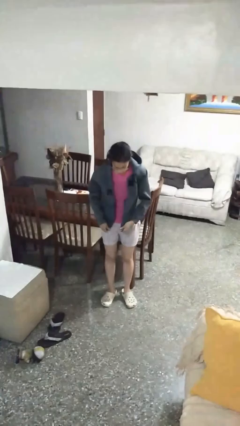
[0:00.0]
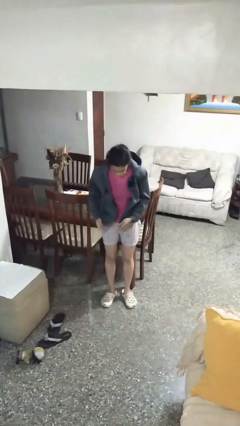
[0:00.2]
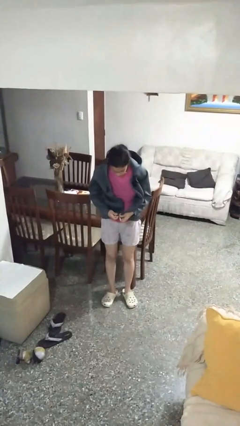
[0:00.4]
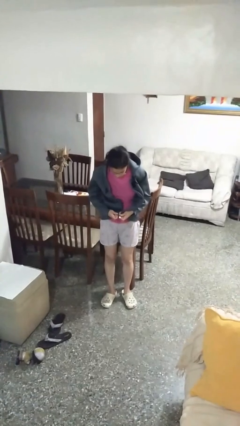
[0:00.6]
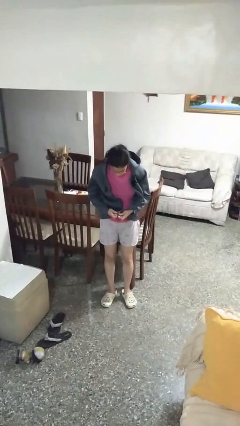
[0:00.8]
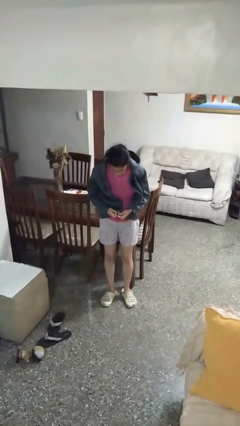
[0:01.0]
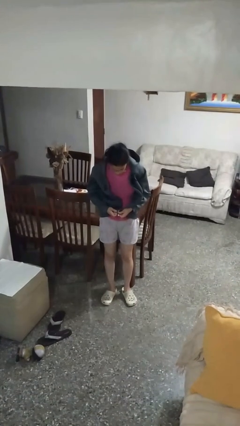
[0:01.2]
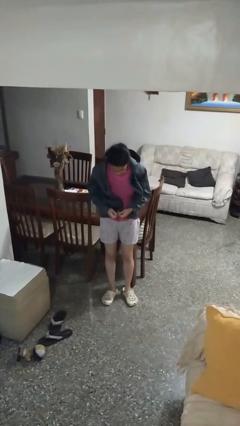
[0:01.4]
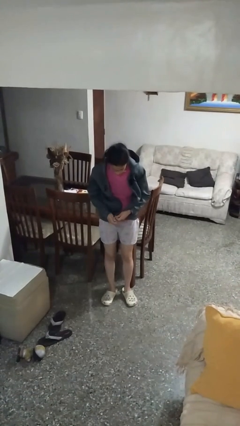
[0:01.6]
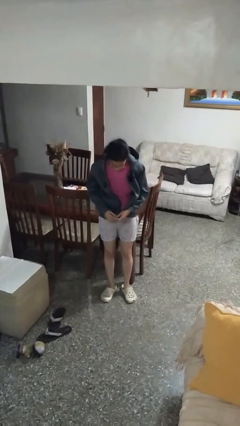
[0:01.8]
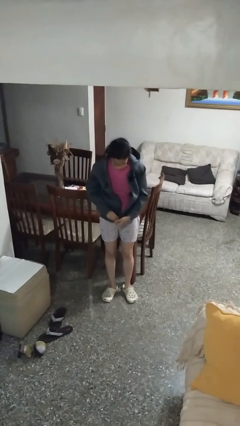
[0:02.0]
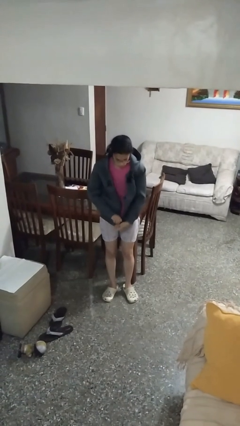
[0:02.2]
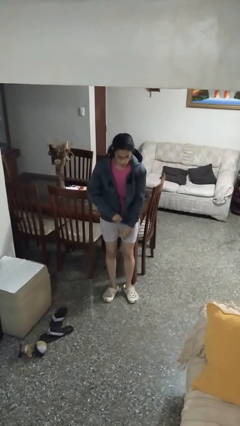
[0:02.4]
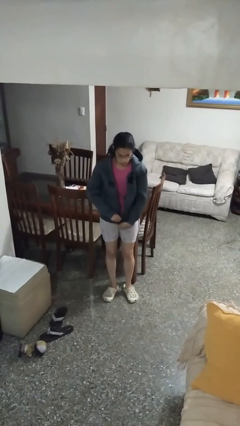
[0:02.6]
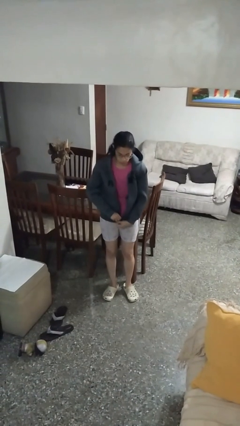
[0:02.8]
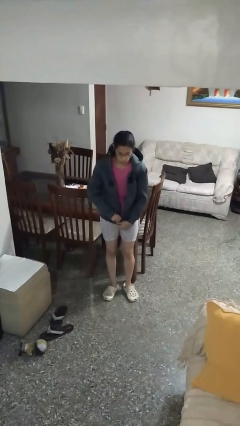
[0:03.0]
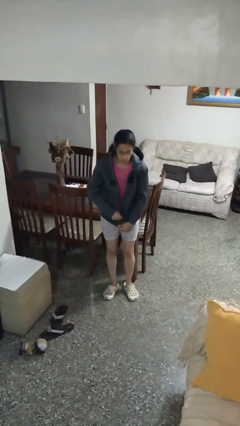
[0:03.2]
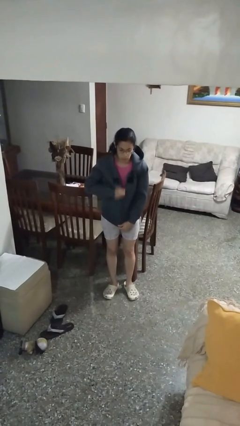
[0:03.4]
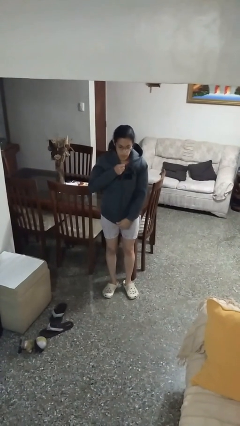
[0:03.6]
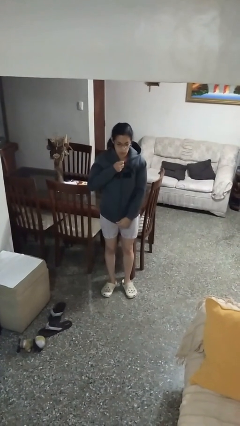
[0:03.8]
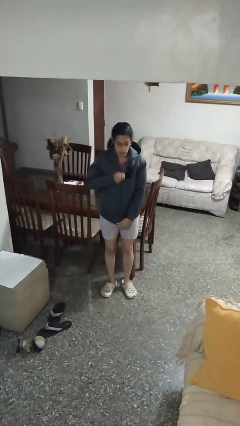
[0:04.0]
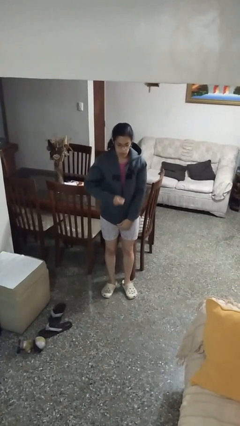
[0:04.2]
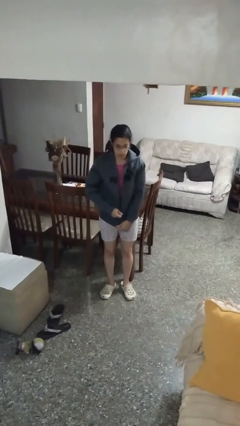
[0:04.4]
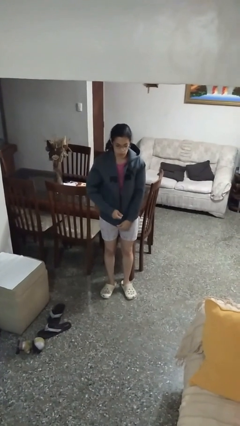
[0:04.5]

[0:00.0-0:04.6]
person zips up jacket

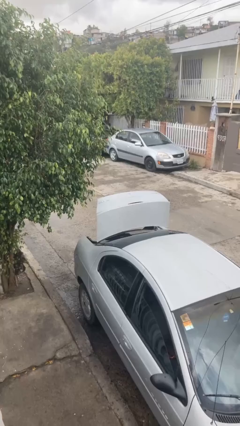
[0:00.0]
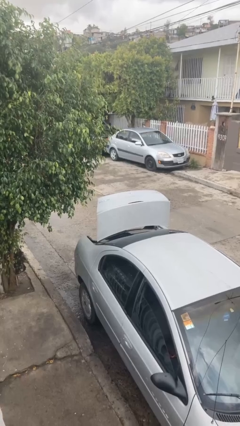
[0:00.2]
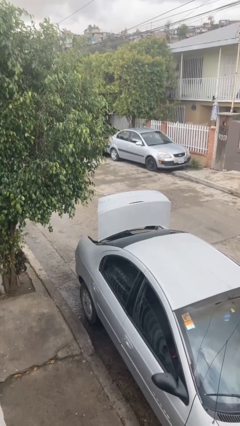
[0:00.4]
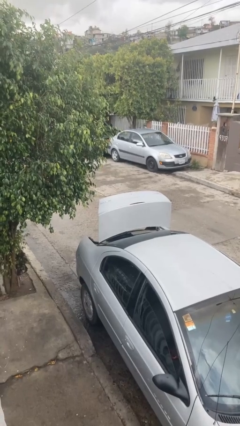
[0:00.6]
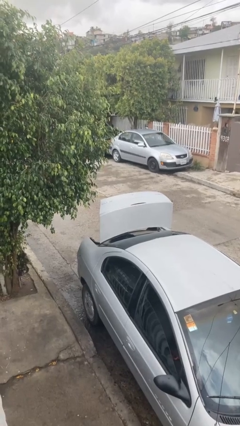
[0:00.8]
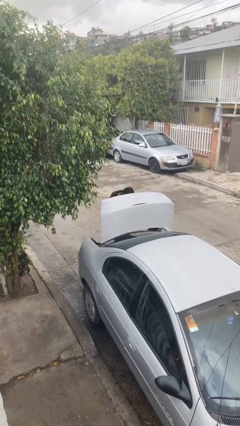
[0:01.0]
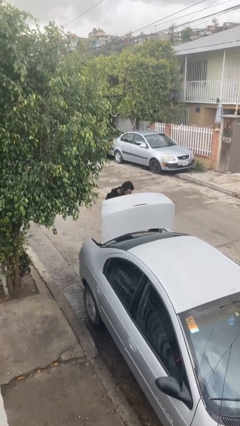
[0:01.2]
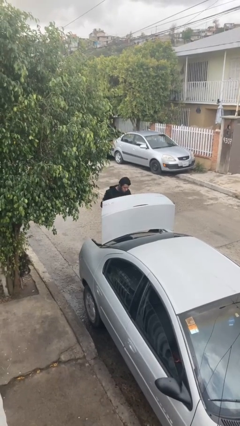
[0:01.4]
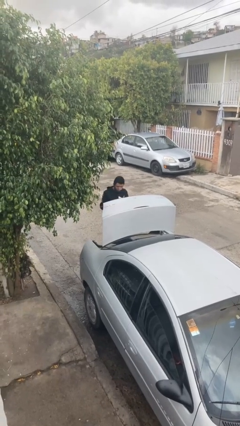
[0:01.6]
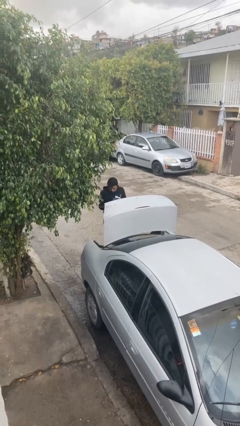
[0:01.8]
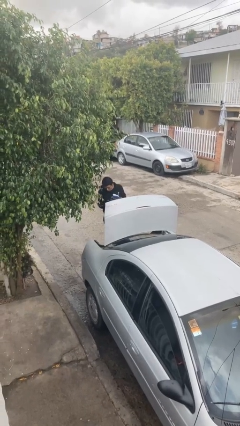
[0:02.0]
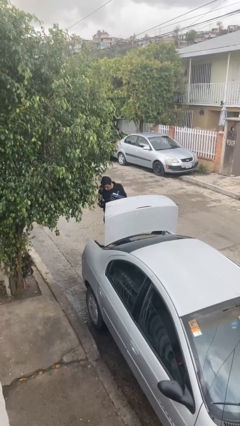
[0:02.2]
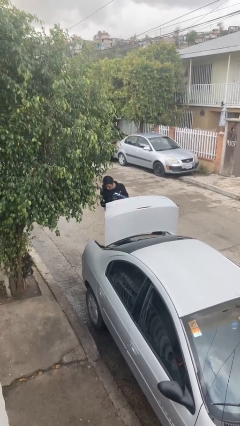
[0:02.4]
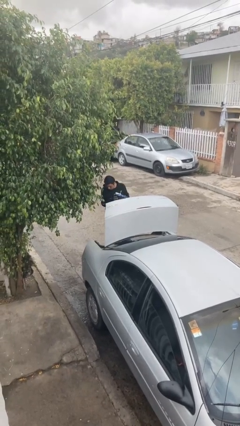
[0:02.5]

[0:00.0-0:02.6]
person unloads car

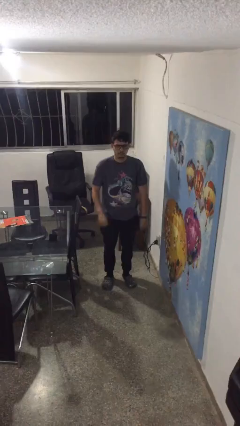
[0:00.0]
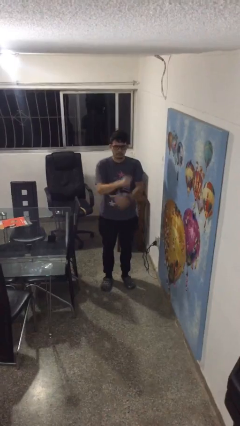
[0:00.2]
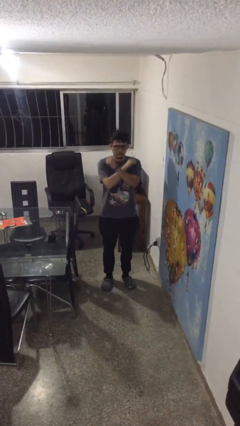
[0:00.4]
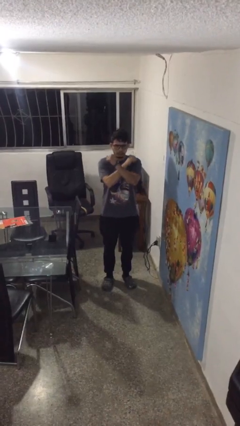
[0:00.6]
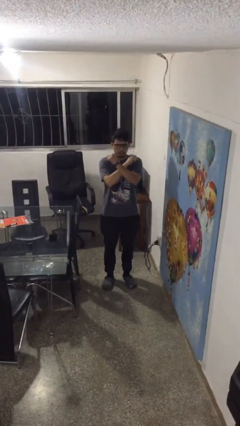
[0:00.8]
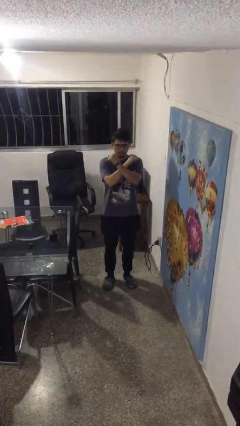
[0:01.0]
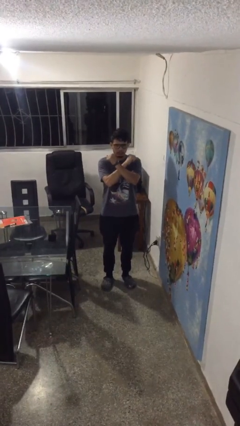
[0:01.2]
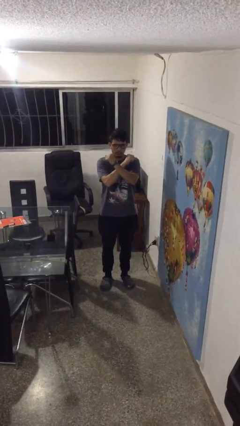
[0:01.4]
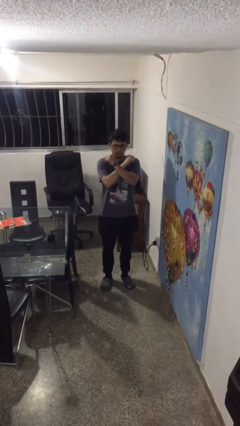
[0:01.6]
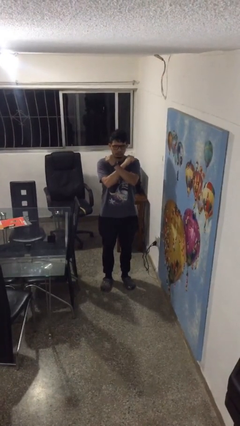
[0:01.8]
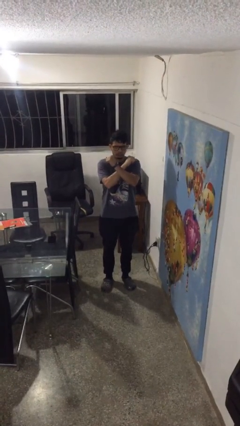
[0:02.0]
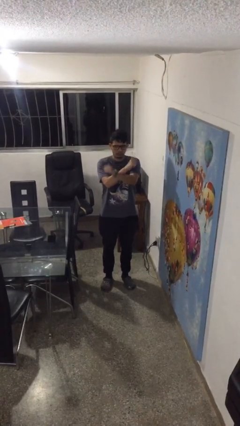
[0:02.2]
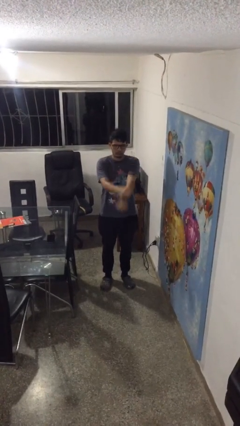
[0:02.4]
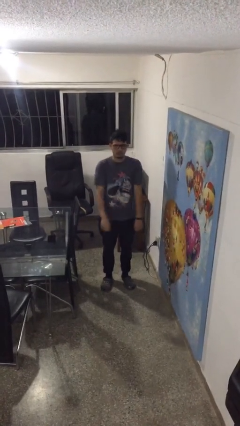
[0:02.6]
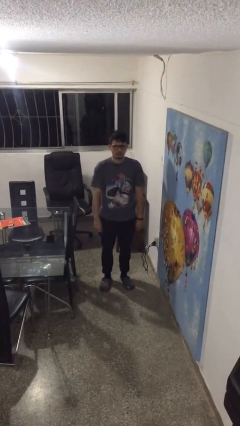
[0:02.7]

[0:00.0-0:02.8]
person gestures arms x

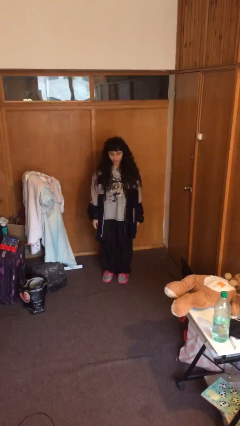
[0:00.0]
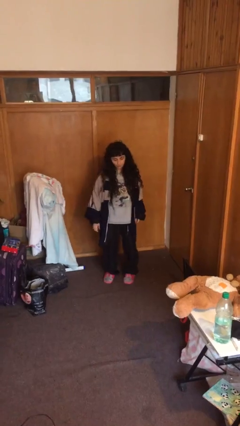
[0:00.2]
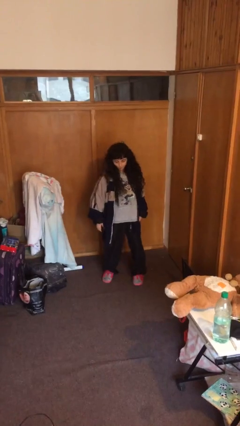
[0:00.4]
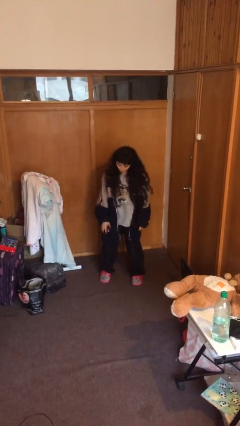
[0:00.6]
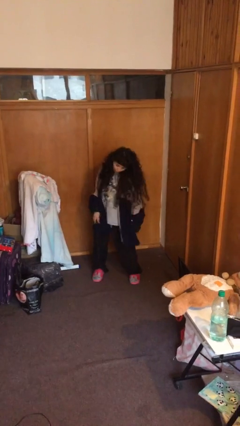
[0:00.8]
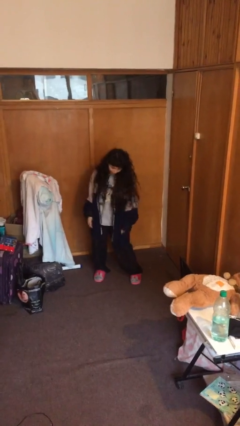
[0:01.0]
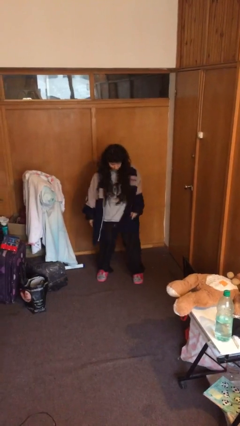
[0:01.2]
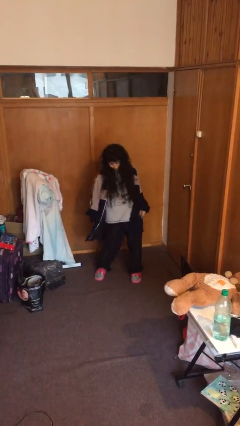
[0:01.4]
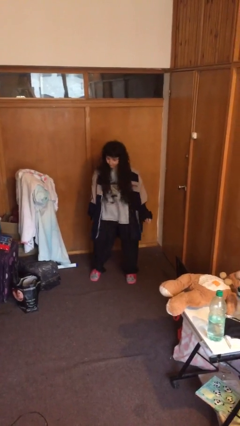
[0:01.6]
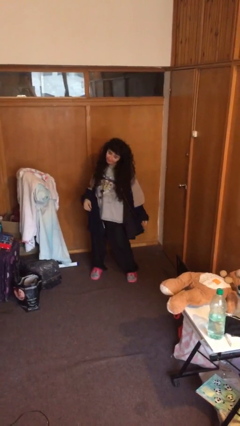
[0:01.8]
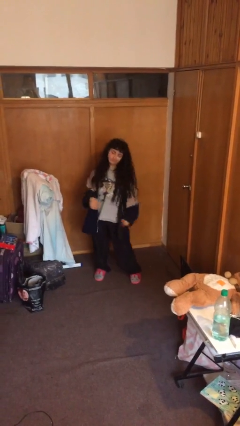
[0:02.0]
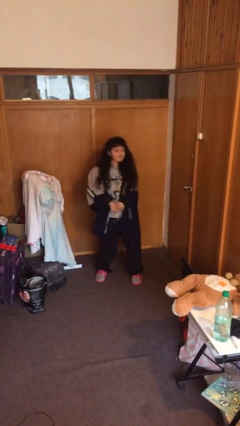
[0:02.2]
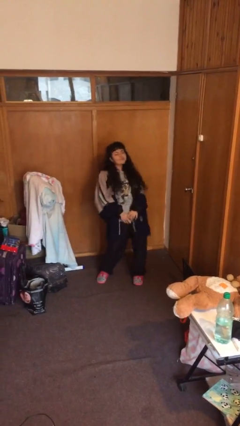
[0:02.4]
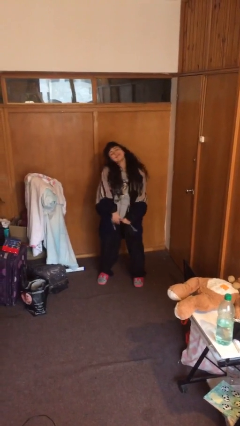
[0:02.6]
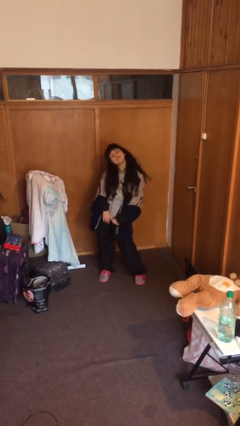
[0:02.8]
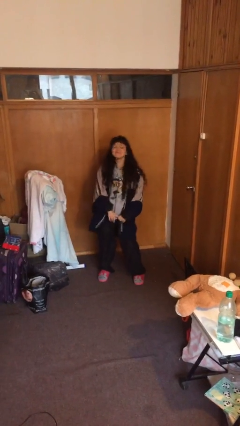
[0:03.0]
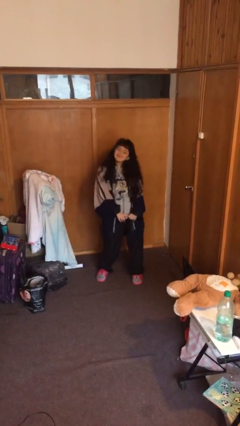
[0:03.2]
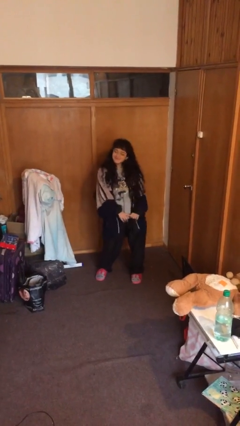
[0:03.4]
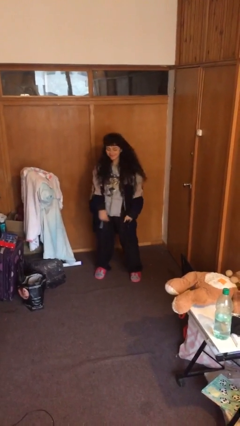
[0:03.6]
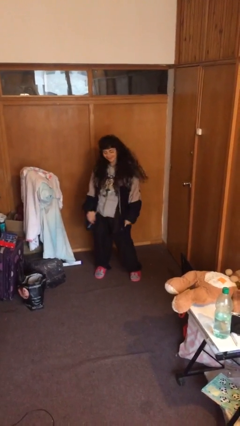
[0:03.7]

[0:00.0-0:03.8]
person dances in place

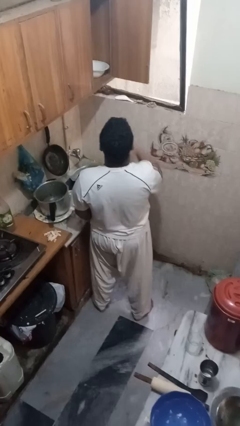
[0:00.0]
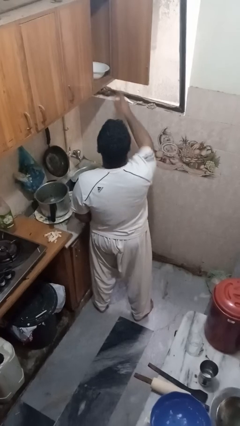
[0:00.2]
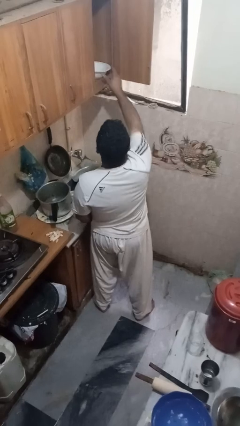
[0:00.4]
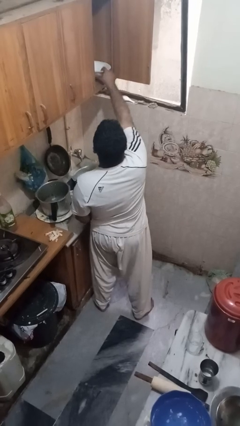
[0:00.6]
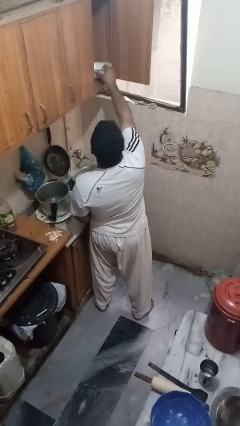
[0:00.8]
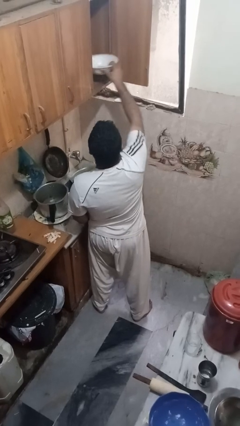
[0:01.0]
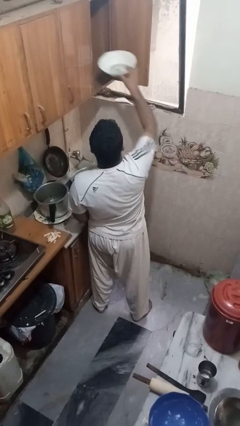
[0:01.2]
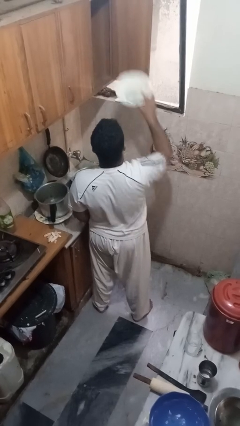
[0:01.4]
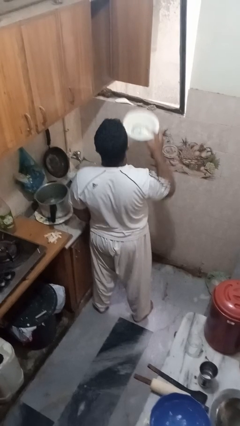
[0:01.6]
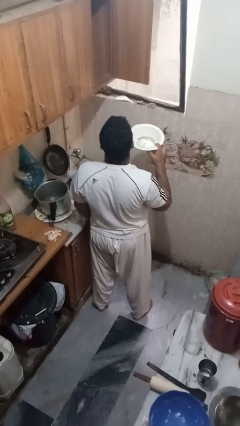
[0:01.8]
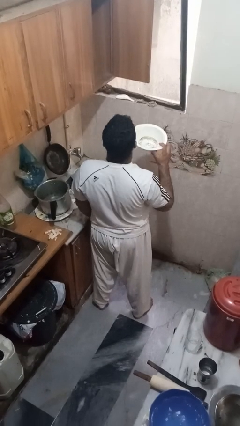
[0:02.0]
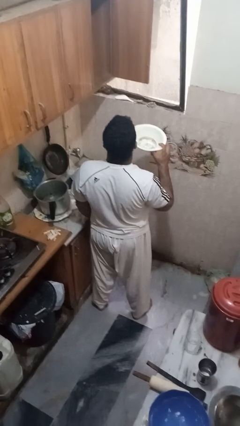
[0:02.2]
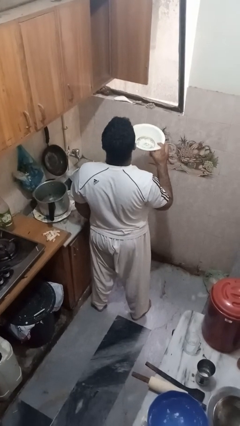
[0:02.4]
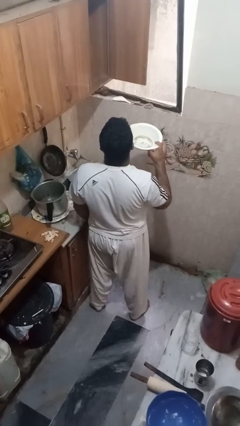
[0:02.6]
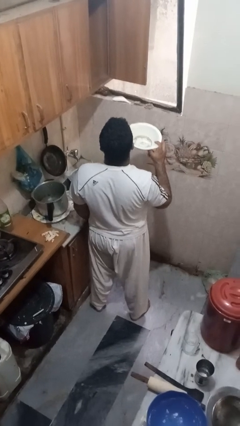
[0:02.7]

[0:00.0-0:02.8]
person takes object from cabinet

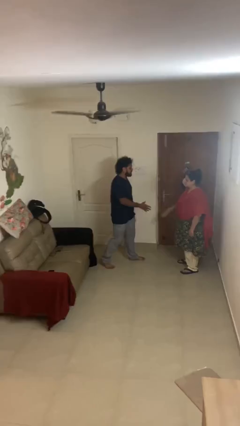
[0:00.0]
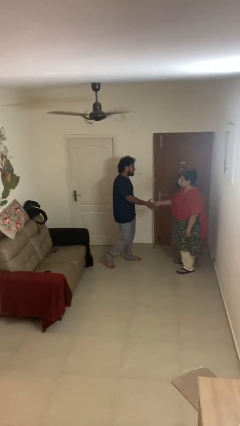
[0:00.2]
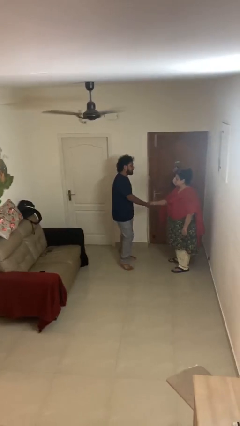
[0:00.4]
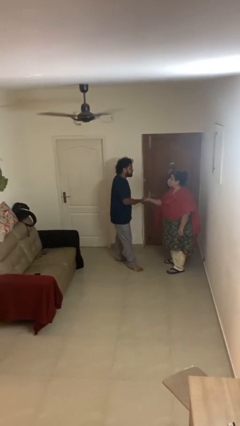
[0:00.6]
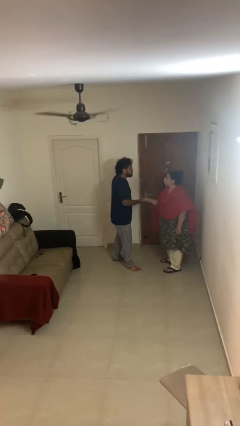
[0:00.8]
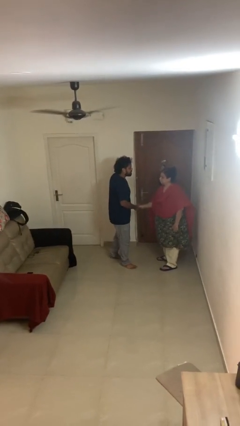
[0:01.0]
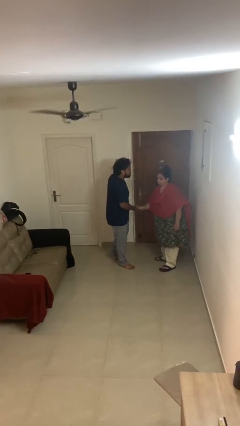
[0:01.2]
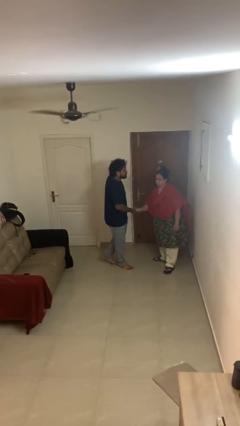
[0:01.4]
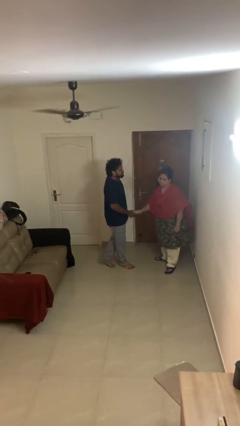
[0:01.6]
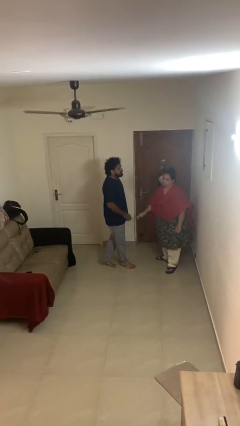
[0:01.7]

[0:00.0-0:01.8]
person shakes hand
